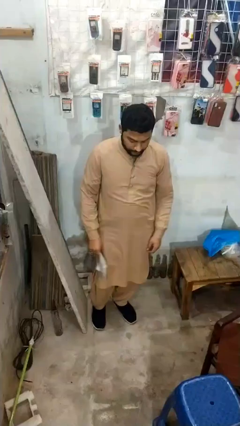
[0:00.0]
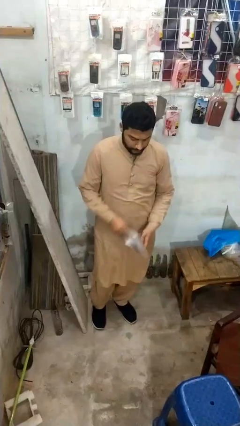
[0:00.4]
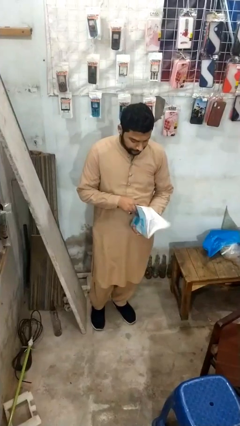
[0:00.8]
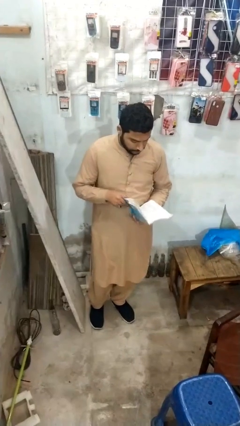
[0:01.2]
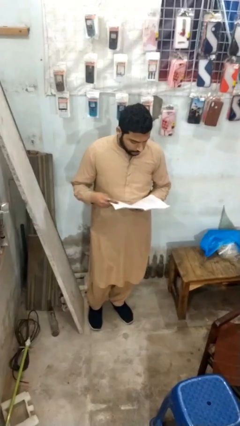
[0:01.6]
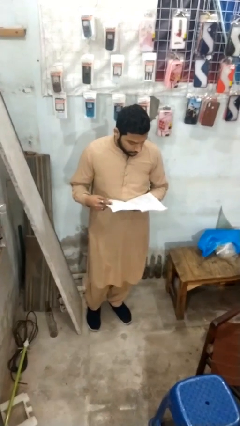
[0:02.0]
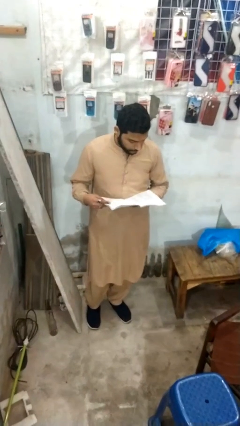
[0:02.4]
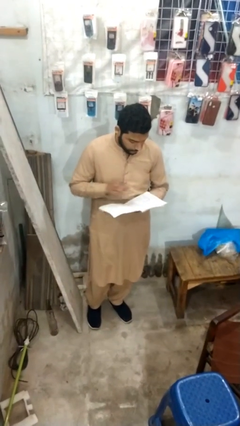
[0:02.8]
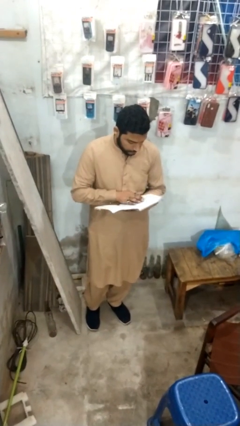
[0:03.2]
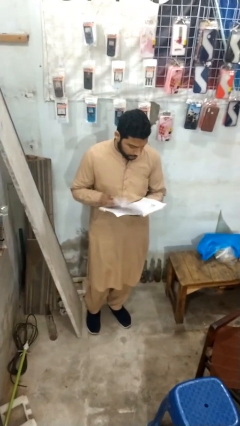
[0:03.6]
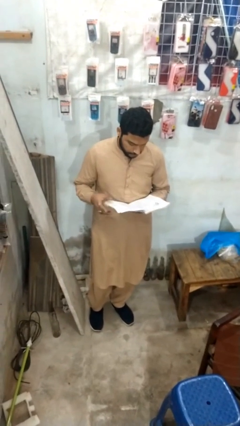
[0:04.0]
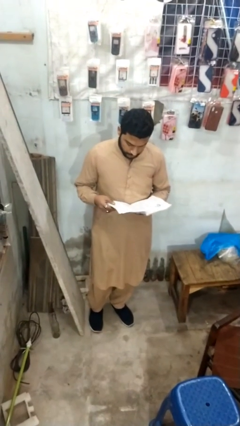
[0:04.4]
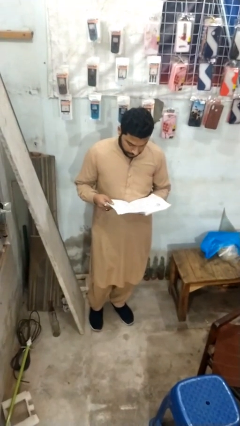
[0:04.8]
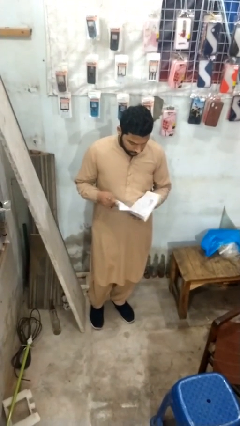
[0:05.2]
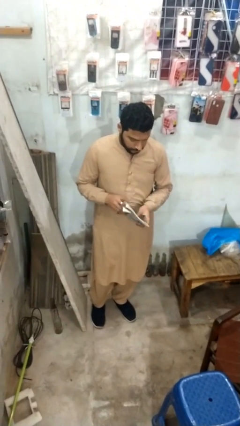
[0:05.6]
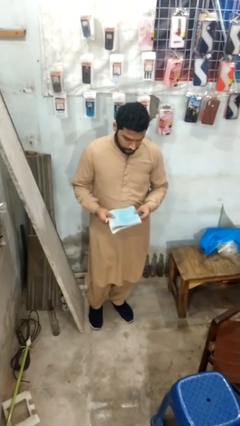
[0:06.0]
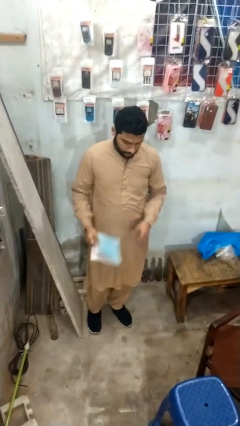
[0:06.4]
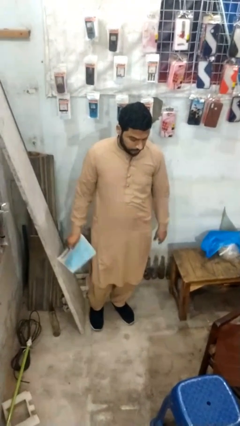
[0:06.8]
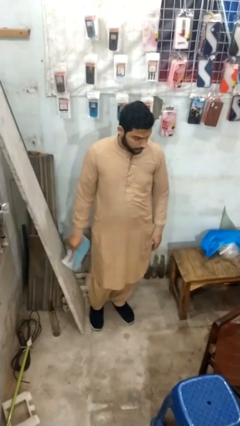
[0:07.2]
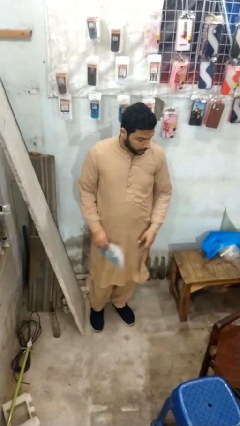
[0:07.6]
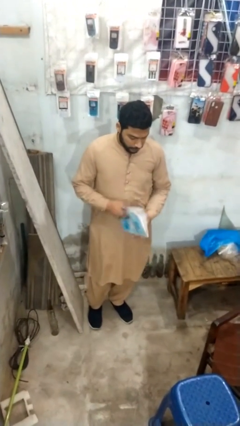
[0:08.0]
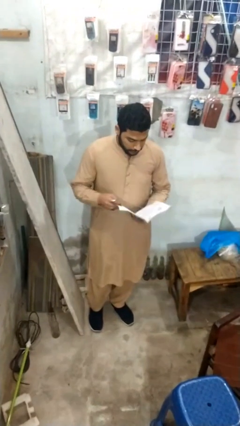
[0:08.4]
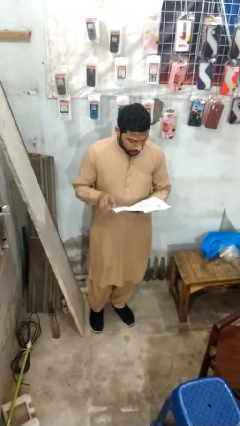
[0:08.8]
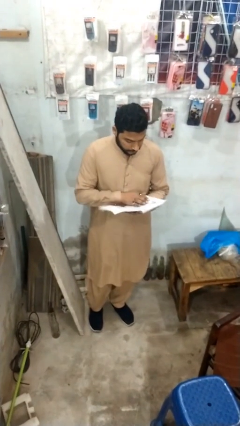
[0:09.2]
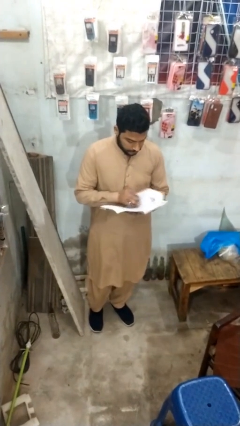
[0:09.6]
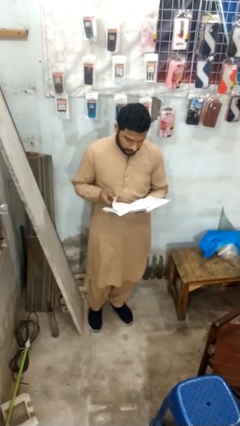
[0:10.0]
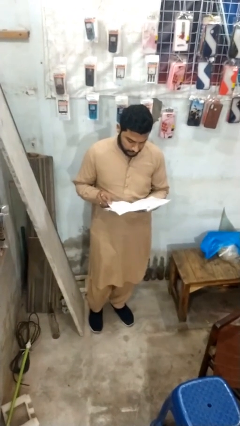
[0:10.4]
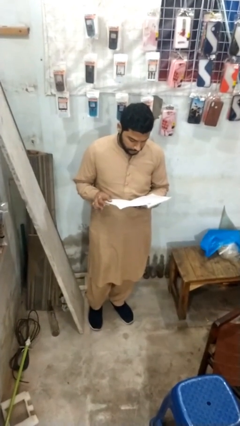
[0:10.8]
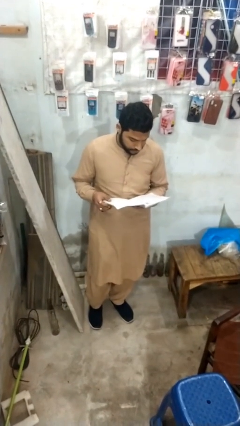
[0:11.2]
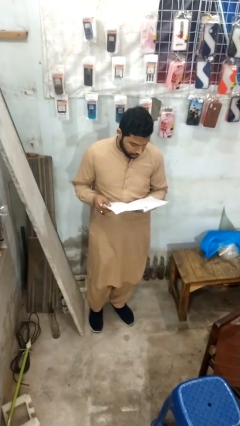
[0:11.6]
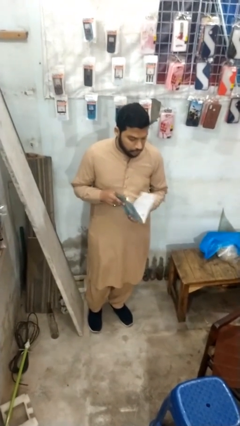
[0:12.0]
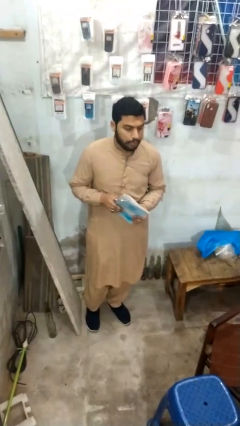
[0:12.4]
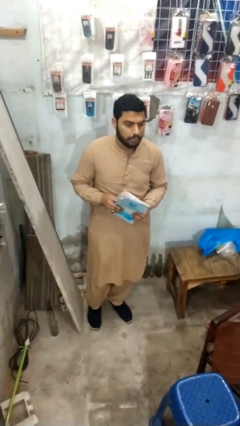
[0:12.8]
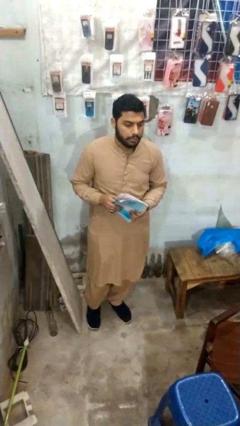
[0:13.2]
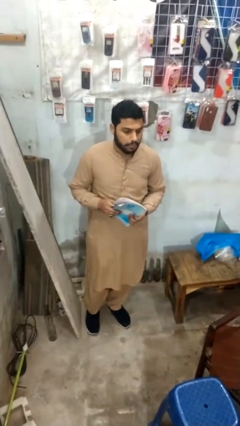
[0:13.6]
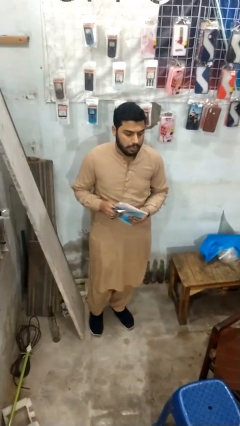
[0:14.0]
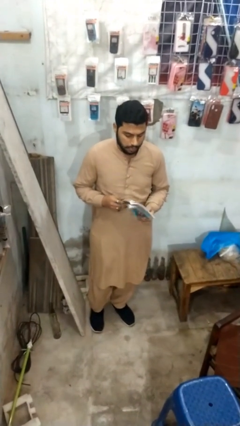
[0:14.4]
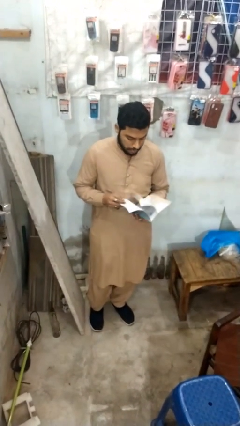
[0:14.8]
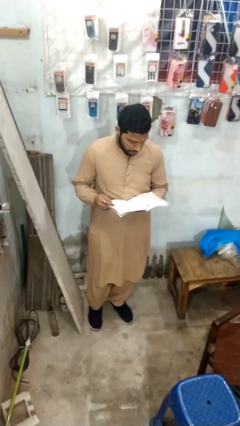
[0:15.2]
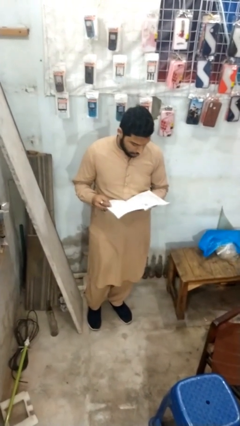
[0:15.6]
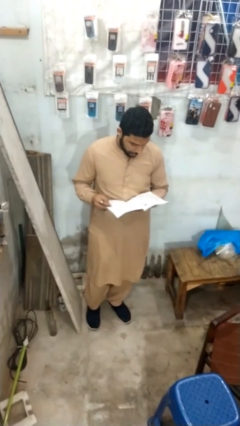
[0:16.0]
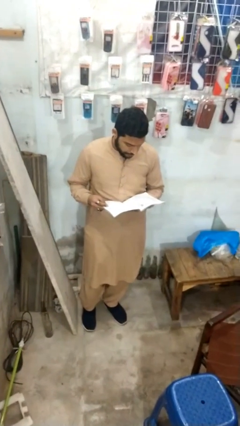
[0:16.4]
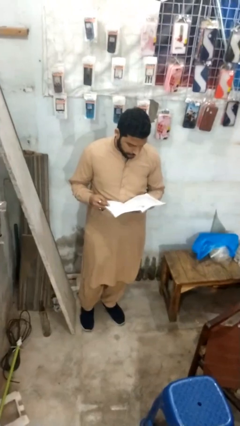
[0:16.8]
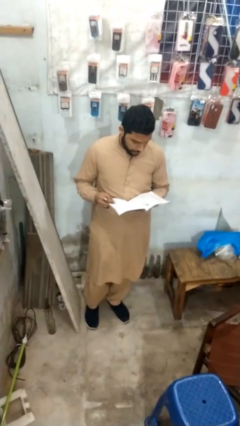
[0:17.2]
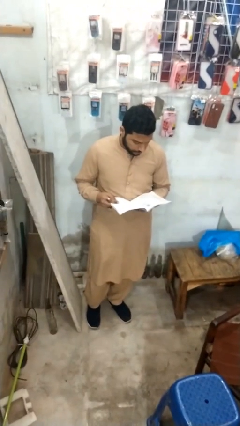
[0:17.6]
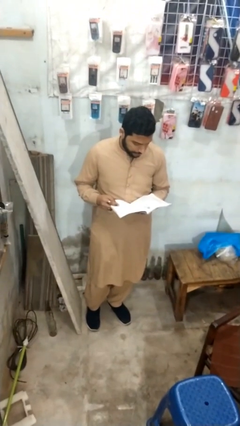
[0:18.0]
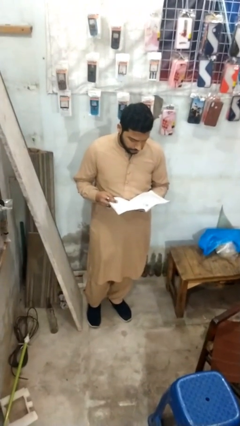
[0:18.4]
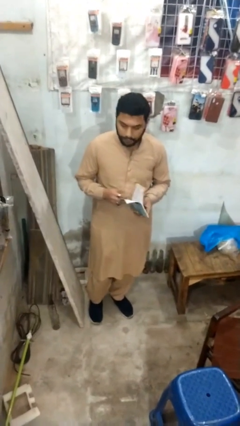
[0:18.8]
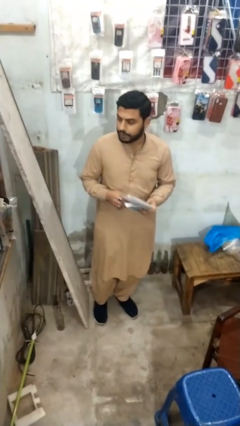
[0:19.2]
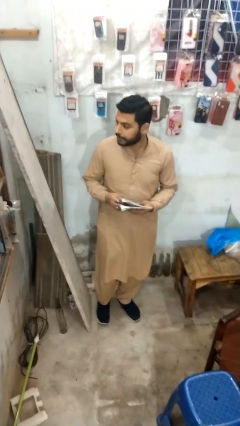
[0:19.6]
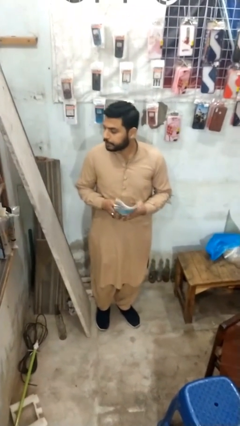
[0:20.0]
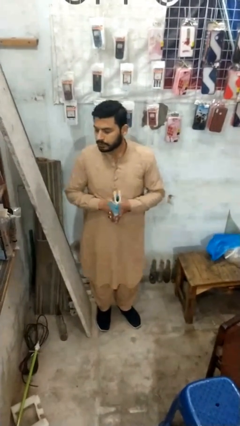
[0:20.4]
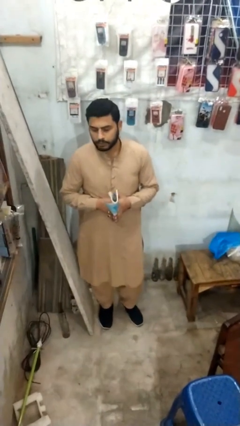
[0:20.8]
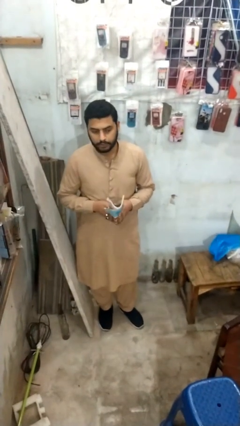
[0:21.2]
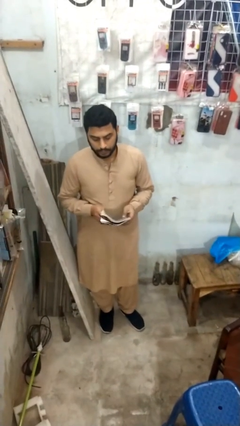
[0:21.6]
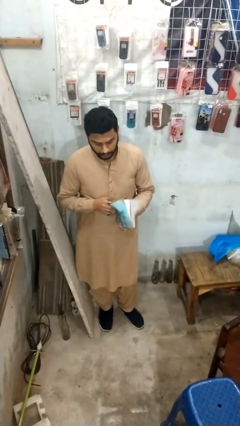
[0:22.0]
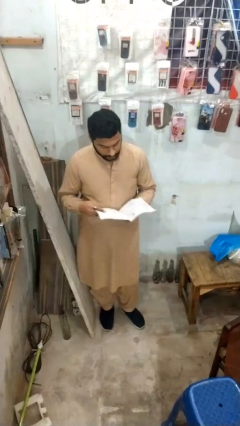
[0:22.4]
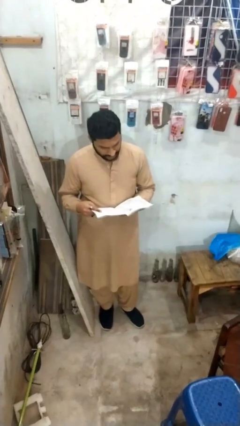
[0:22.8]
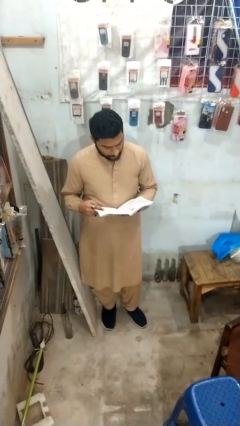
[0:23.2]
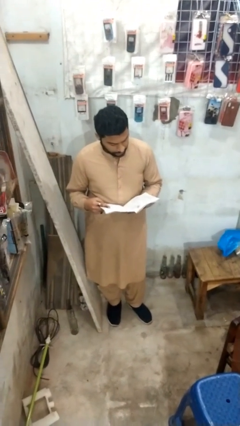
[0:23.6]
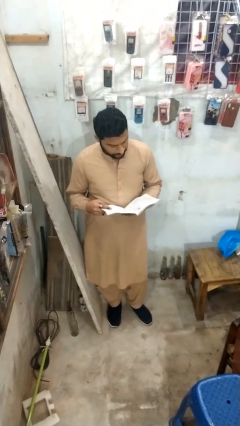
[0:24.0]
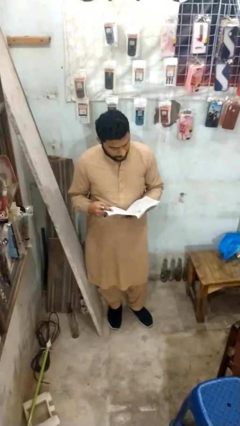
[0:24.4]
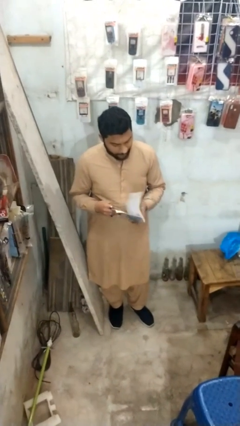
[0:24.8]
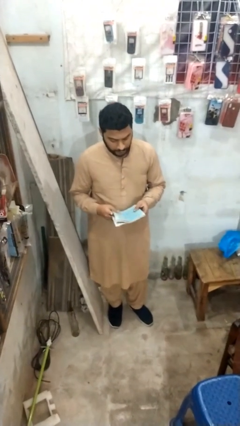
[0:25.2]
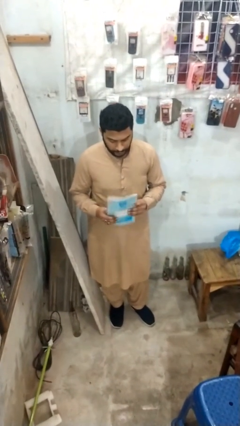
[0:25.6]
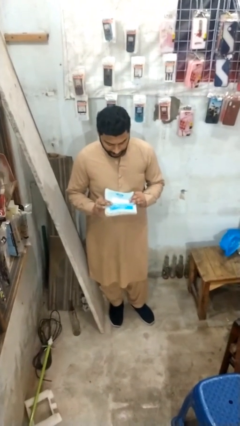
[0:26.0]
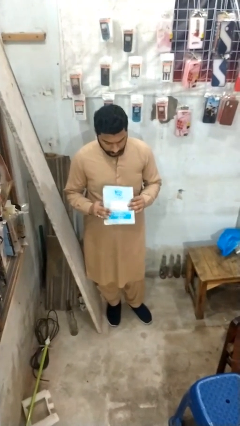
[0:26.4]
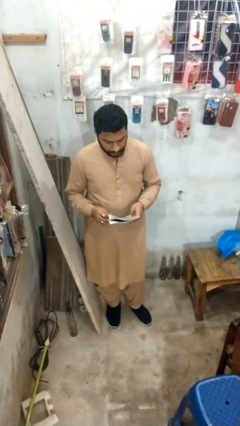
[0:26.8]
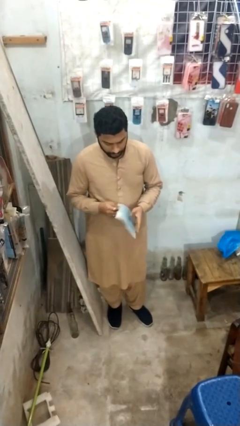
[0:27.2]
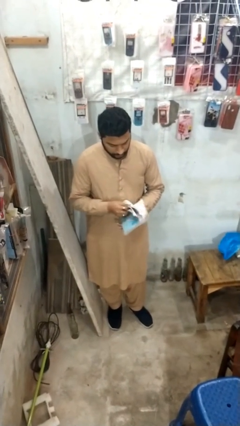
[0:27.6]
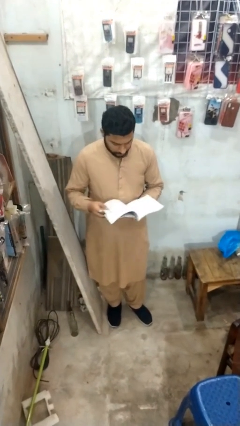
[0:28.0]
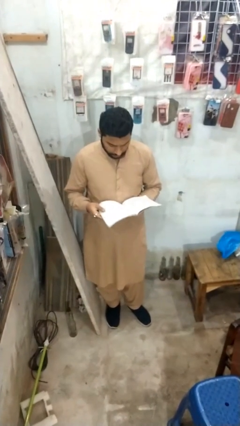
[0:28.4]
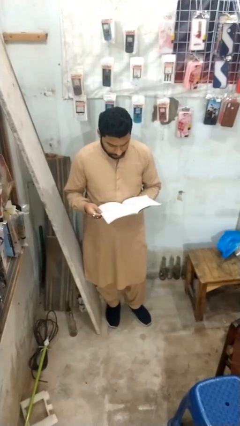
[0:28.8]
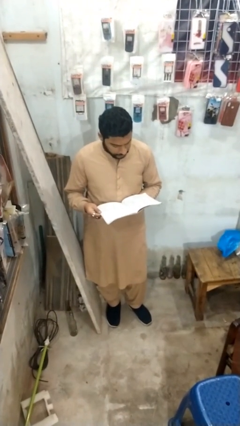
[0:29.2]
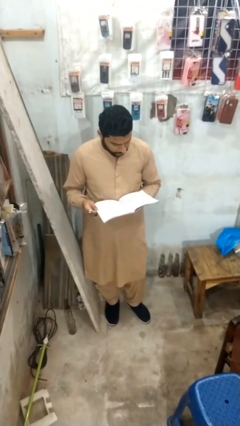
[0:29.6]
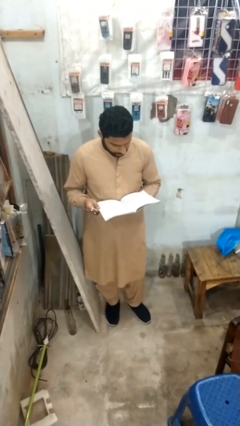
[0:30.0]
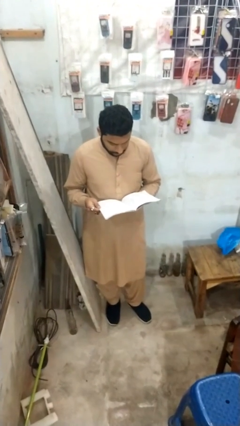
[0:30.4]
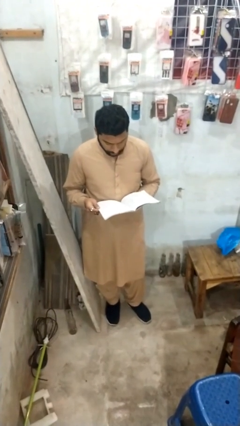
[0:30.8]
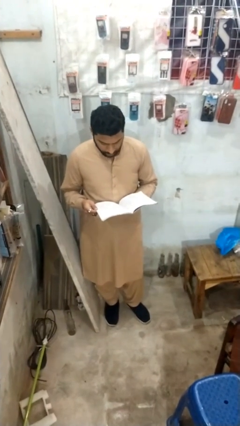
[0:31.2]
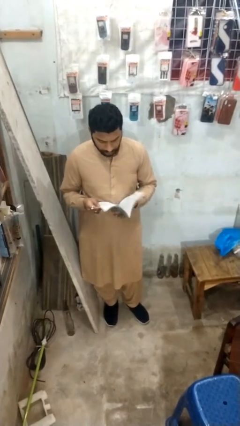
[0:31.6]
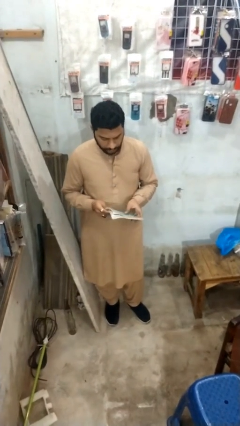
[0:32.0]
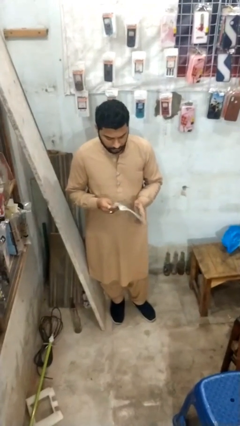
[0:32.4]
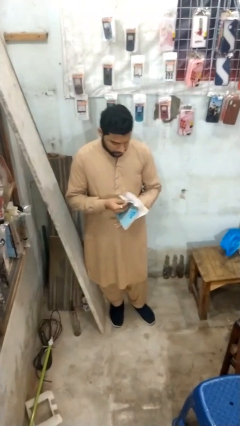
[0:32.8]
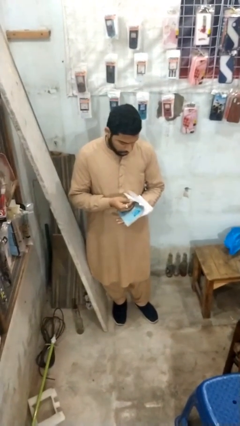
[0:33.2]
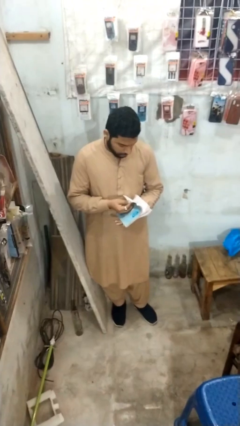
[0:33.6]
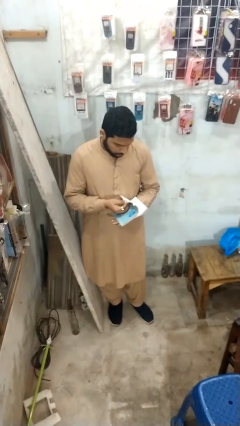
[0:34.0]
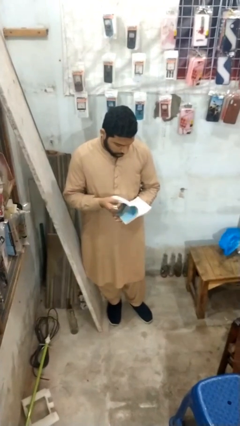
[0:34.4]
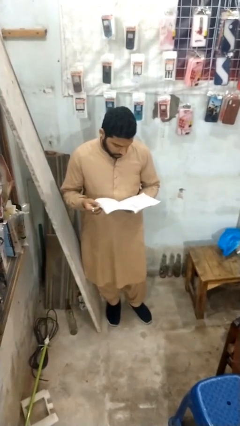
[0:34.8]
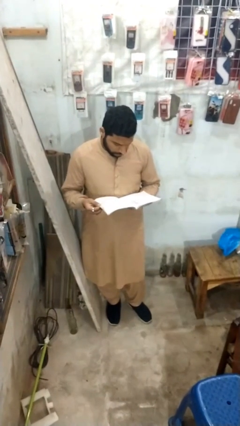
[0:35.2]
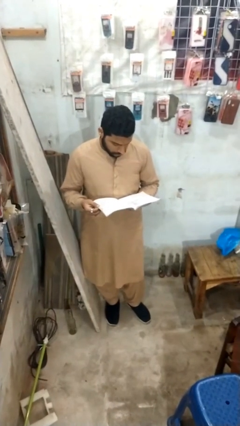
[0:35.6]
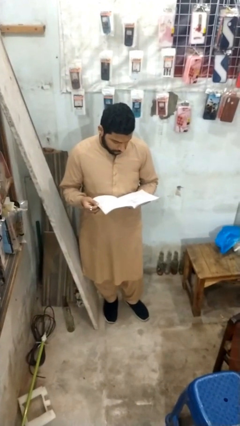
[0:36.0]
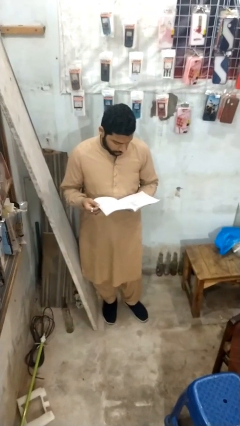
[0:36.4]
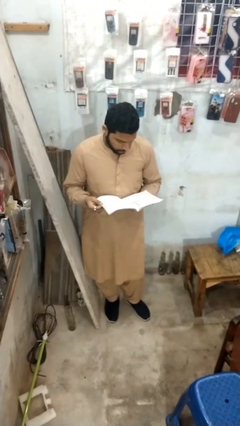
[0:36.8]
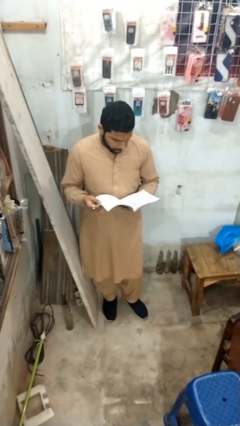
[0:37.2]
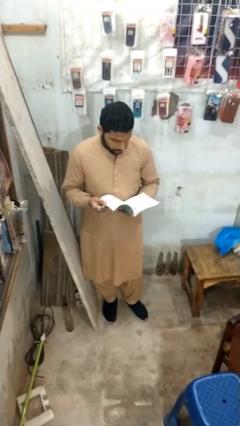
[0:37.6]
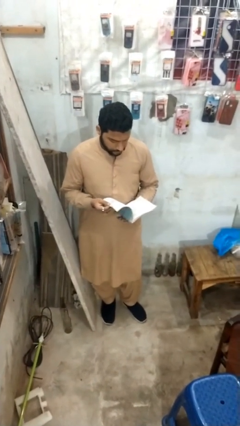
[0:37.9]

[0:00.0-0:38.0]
person reads document
